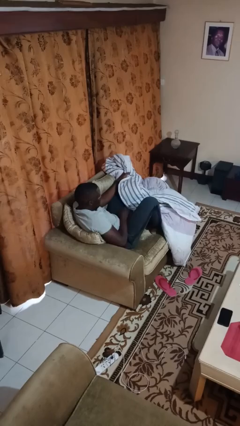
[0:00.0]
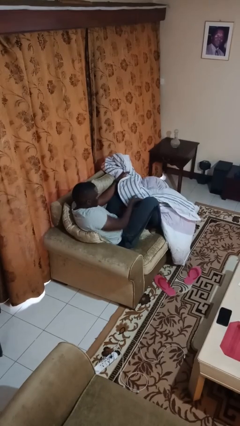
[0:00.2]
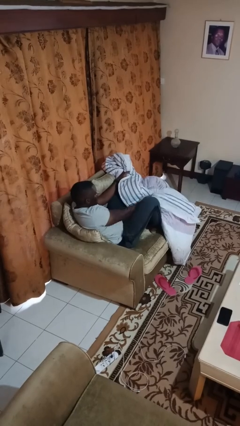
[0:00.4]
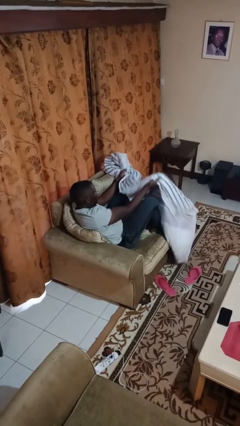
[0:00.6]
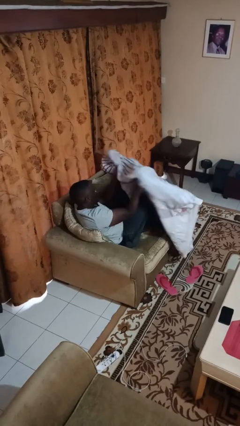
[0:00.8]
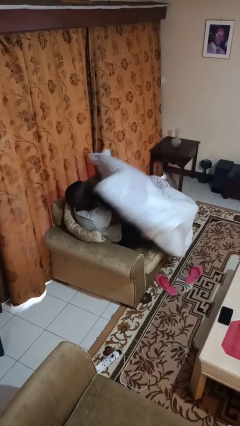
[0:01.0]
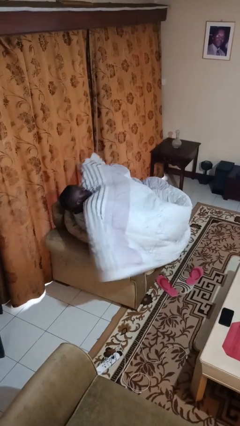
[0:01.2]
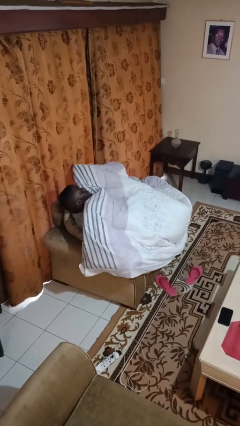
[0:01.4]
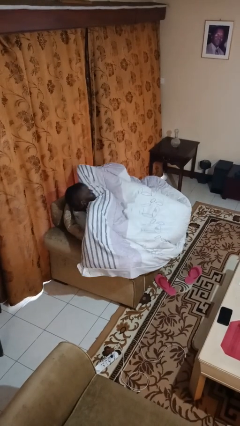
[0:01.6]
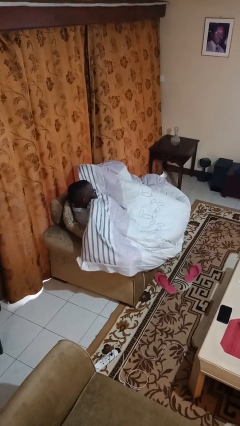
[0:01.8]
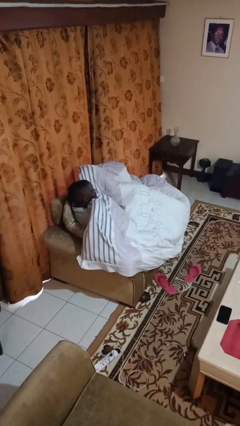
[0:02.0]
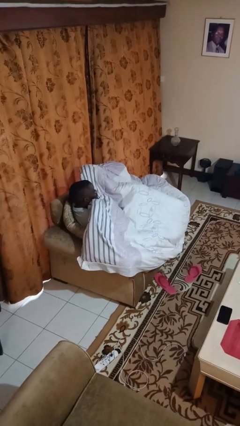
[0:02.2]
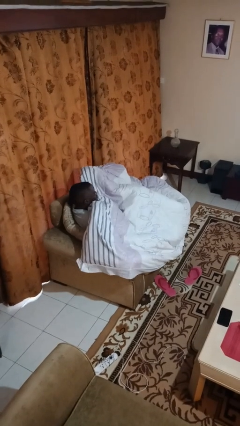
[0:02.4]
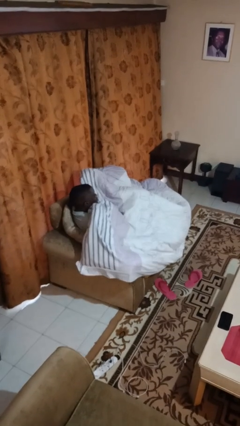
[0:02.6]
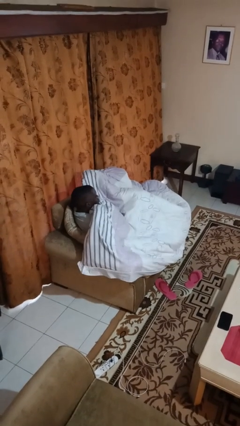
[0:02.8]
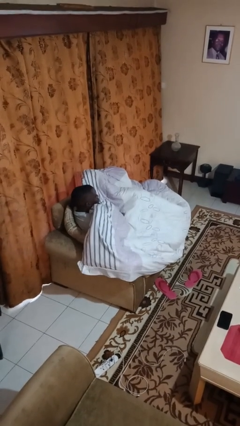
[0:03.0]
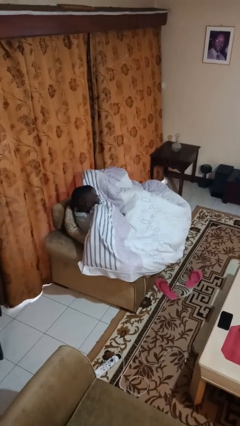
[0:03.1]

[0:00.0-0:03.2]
person covers with blanket

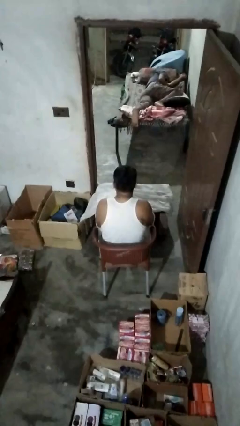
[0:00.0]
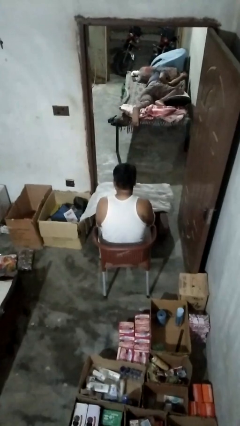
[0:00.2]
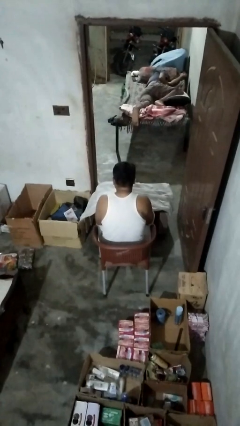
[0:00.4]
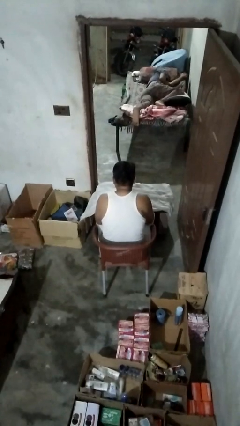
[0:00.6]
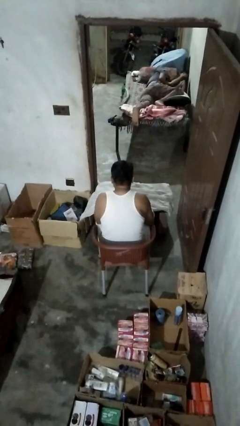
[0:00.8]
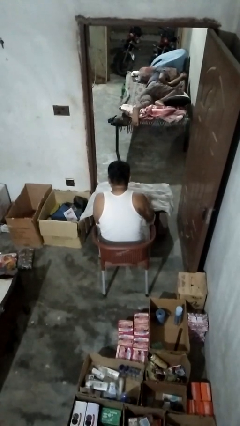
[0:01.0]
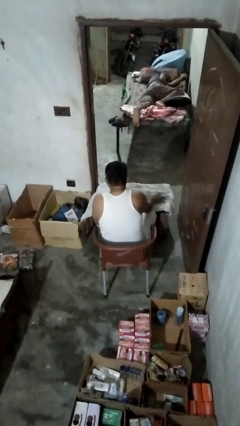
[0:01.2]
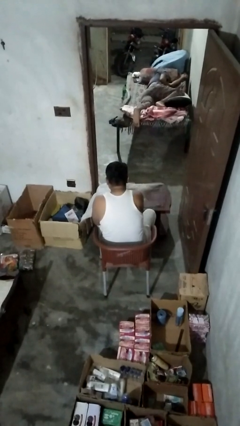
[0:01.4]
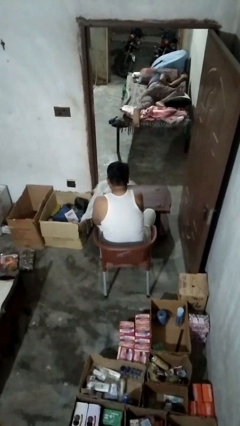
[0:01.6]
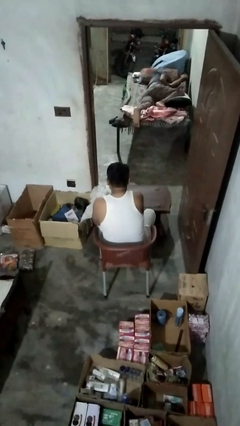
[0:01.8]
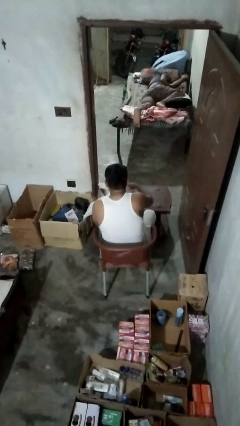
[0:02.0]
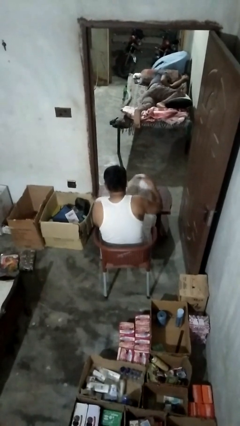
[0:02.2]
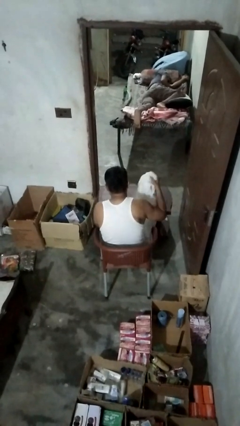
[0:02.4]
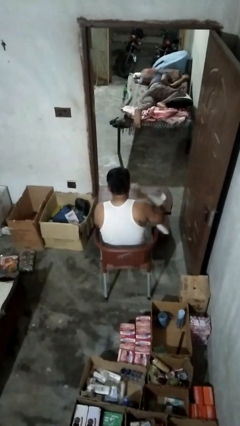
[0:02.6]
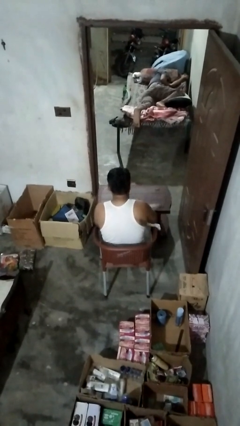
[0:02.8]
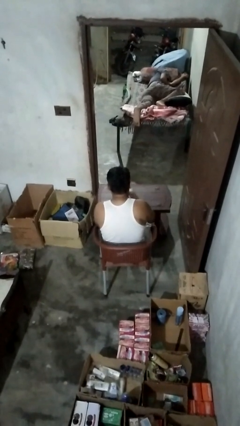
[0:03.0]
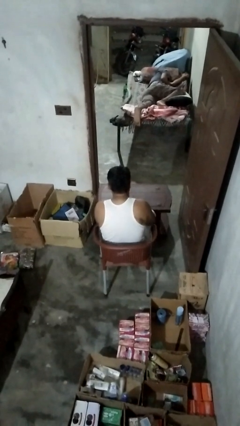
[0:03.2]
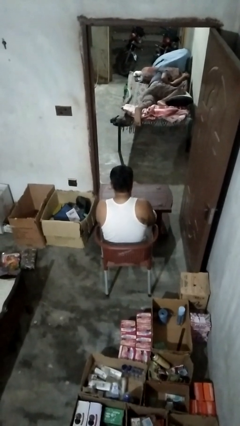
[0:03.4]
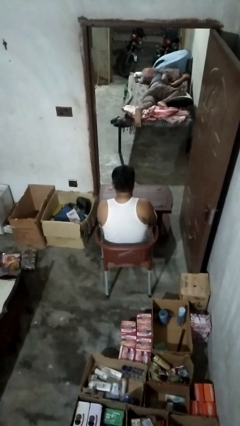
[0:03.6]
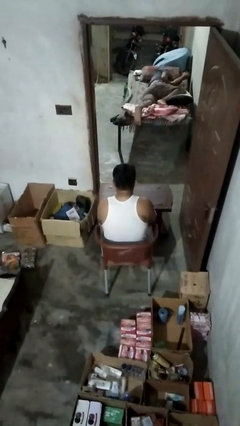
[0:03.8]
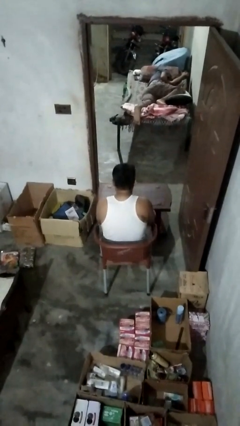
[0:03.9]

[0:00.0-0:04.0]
person folds tablecloth

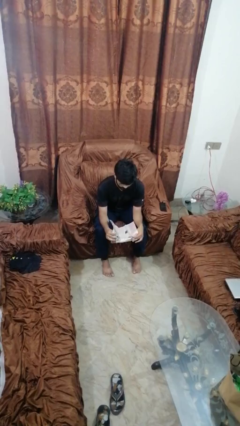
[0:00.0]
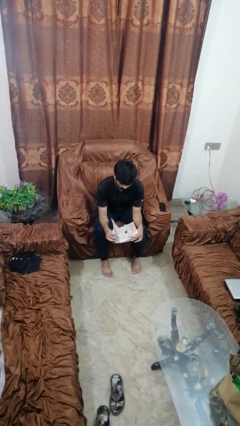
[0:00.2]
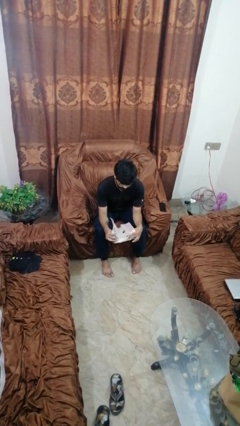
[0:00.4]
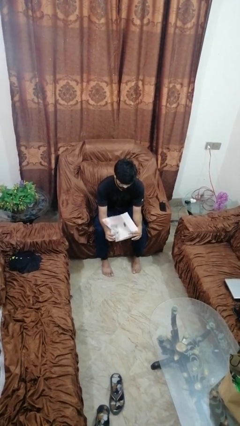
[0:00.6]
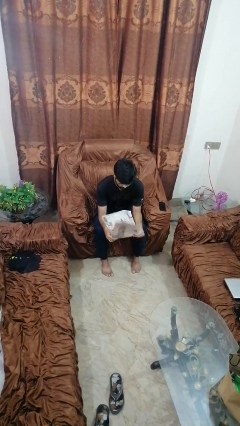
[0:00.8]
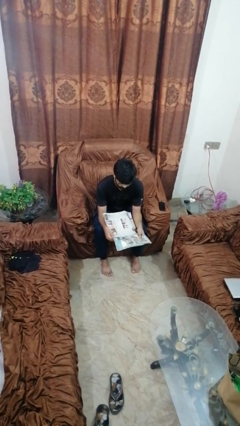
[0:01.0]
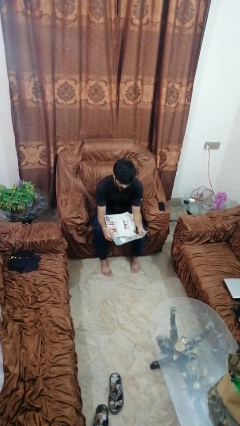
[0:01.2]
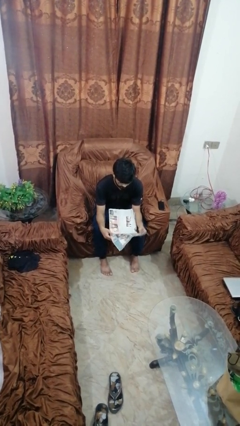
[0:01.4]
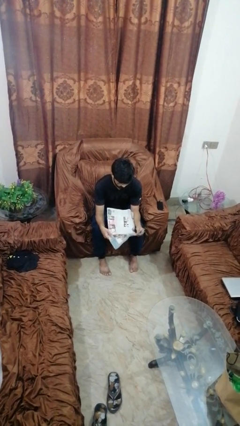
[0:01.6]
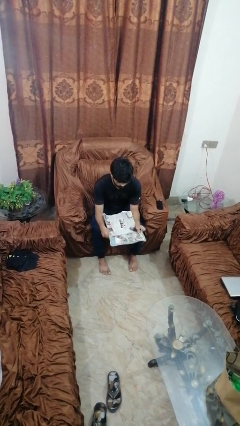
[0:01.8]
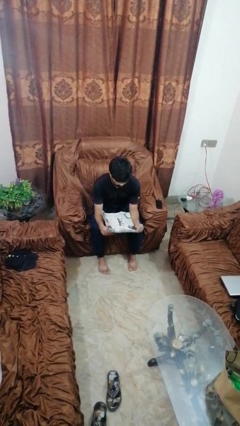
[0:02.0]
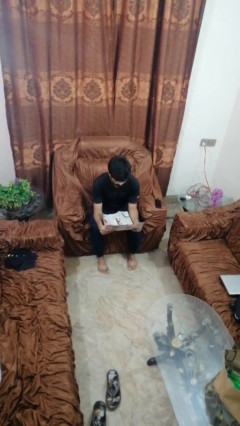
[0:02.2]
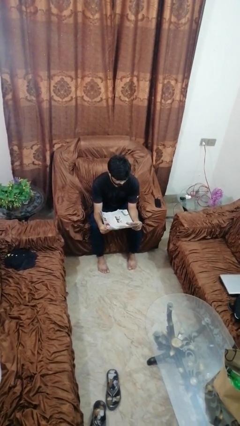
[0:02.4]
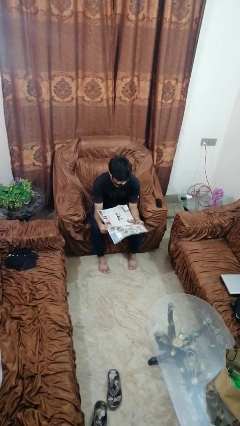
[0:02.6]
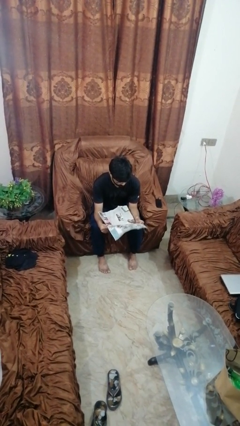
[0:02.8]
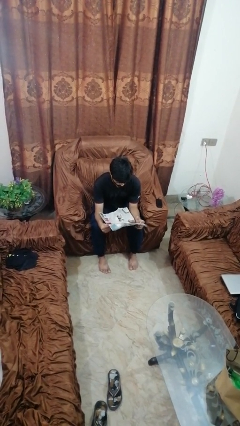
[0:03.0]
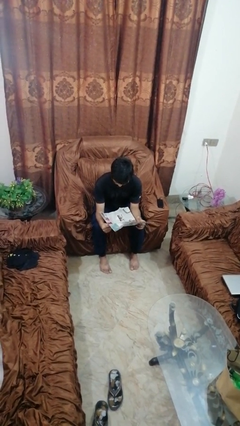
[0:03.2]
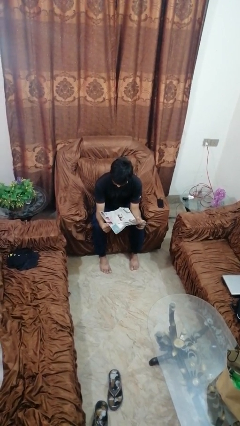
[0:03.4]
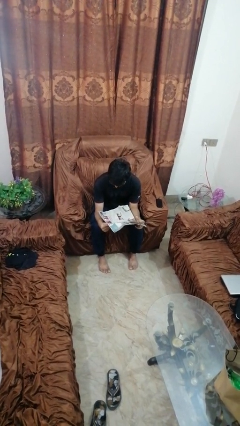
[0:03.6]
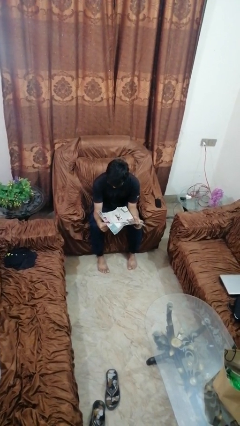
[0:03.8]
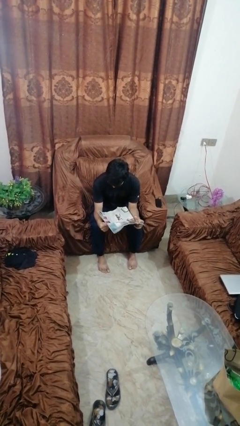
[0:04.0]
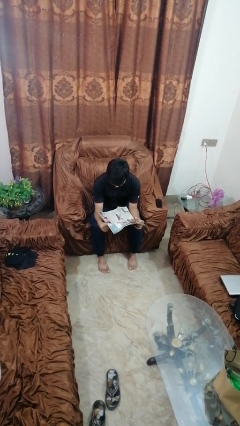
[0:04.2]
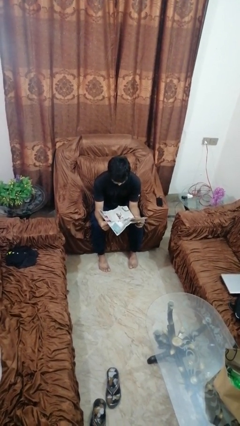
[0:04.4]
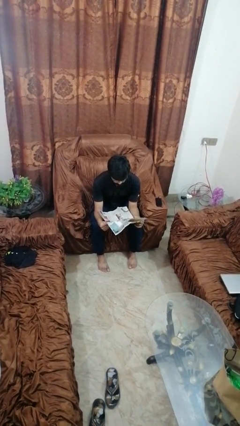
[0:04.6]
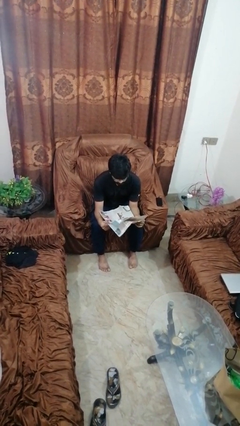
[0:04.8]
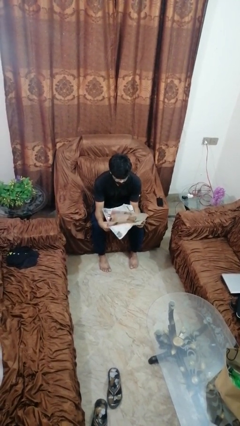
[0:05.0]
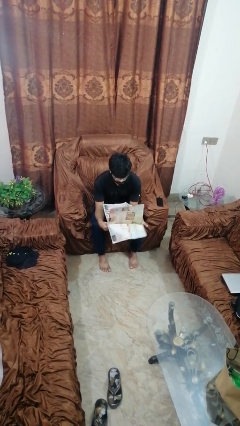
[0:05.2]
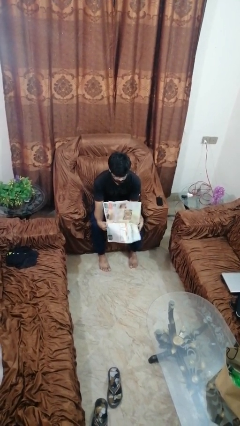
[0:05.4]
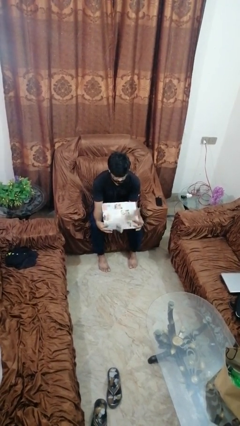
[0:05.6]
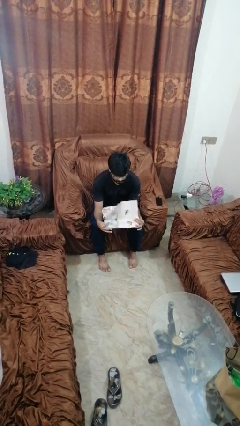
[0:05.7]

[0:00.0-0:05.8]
person reads newspaper

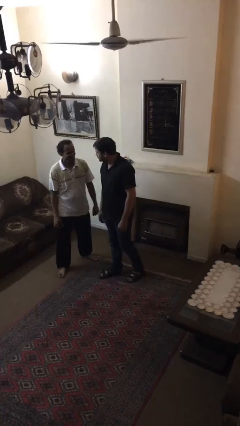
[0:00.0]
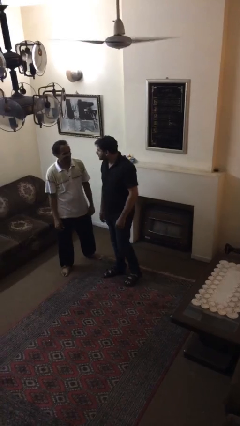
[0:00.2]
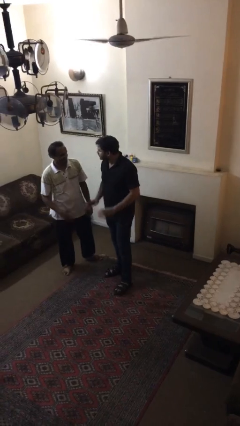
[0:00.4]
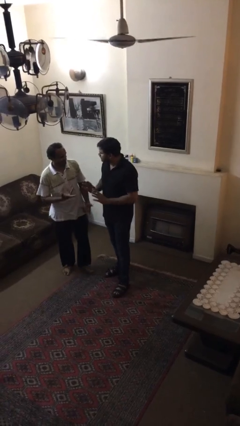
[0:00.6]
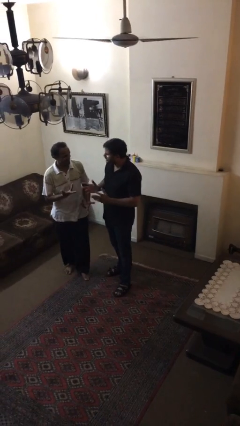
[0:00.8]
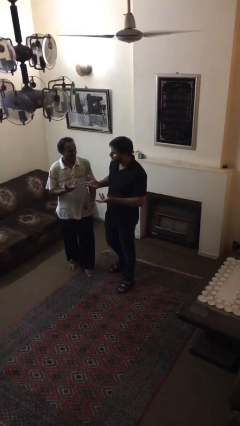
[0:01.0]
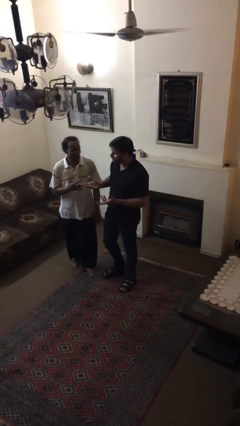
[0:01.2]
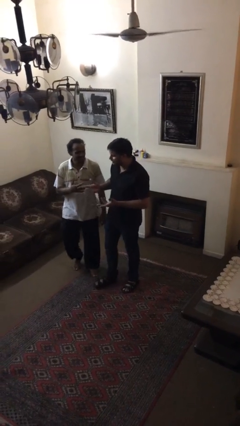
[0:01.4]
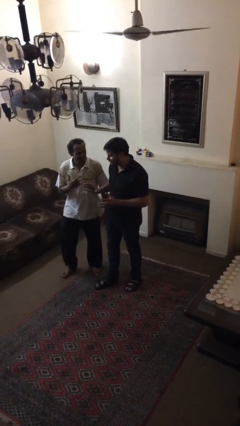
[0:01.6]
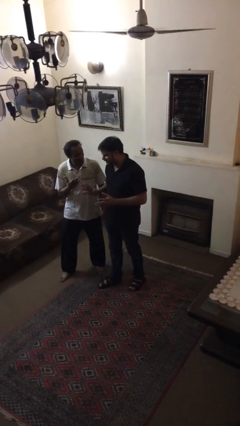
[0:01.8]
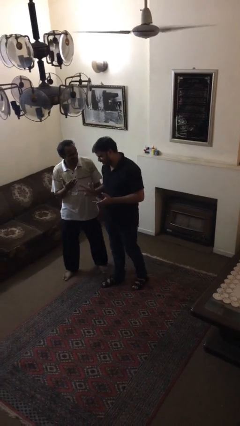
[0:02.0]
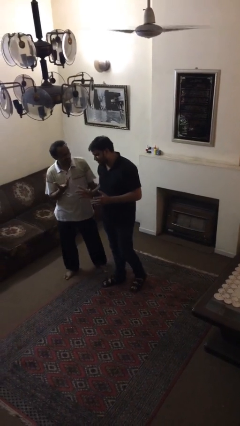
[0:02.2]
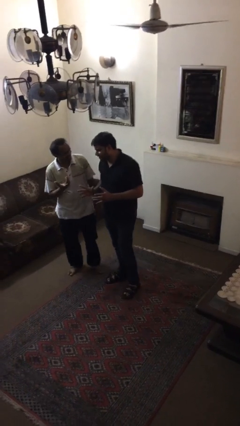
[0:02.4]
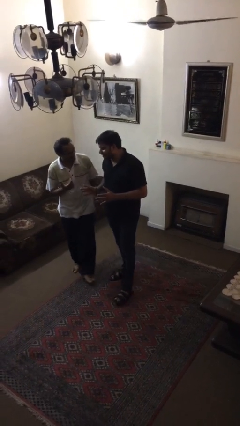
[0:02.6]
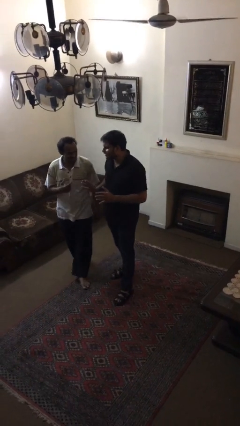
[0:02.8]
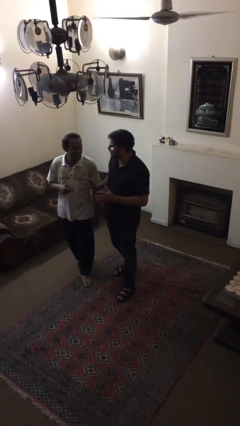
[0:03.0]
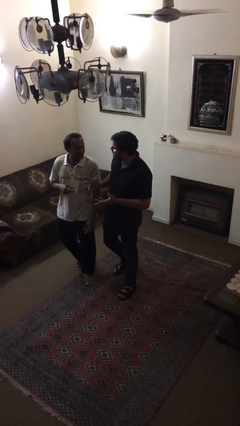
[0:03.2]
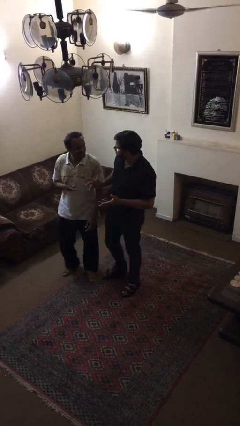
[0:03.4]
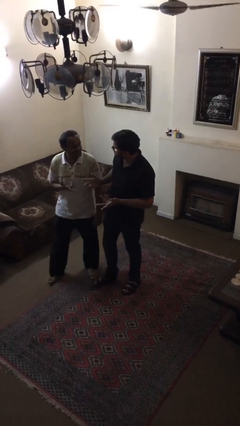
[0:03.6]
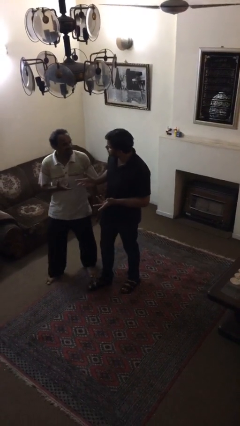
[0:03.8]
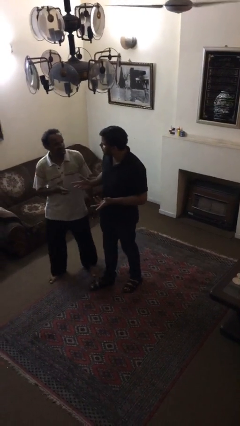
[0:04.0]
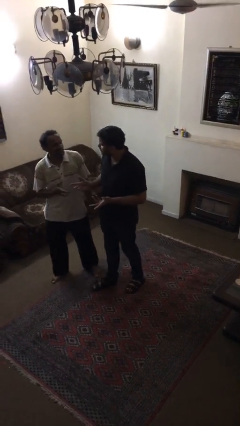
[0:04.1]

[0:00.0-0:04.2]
person talks to person
